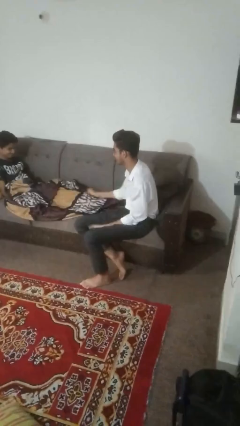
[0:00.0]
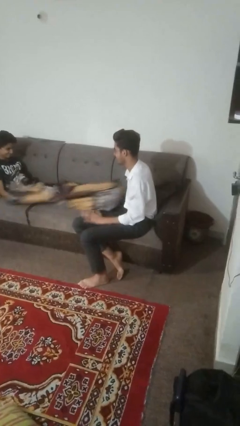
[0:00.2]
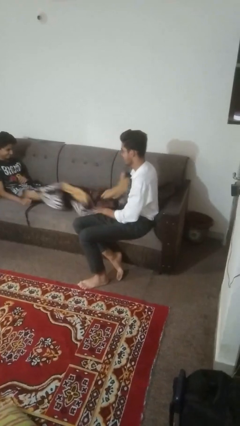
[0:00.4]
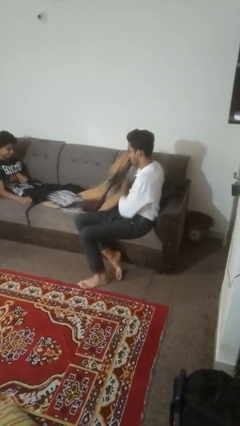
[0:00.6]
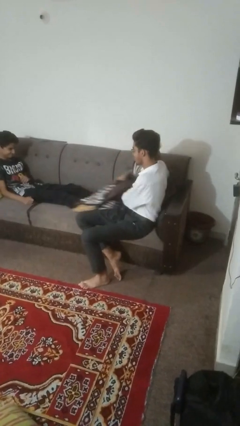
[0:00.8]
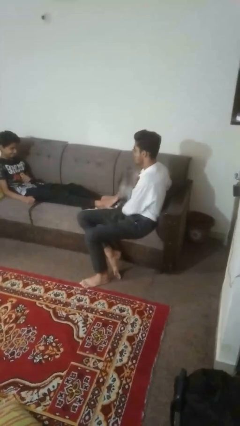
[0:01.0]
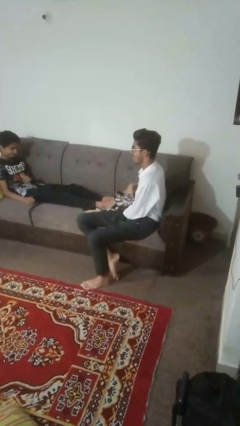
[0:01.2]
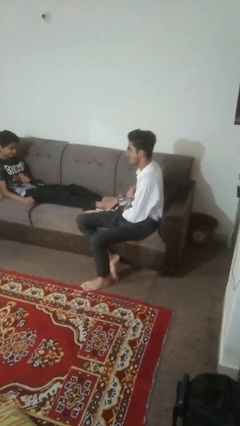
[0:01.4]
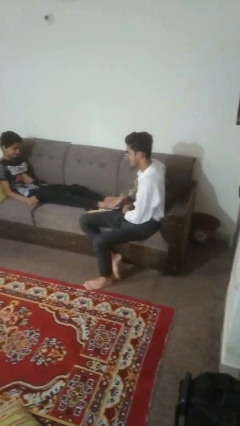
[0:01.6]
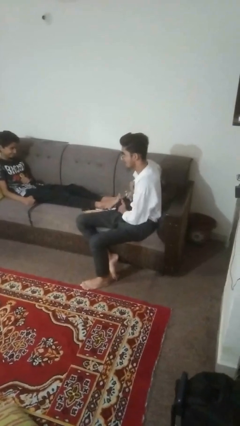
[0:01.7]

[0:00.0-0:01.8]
person uncovers friend with blanket

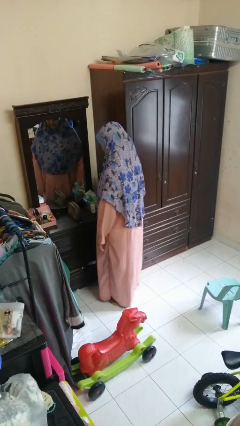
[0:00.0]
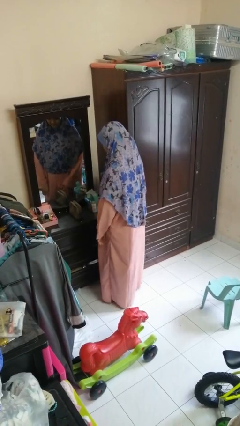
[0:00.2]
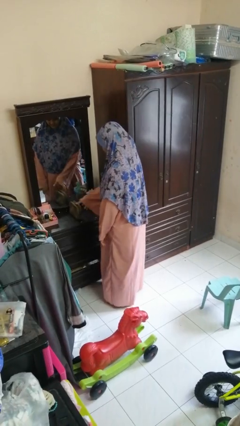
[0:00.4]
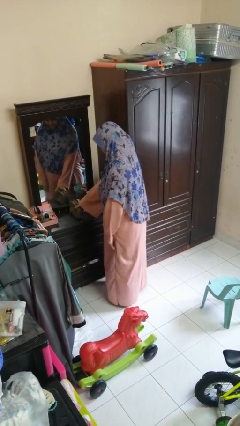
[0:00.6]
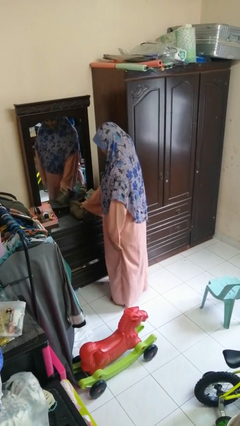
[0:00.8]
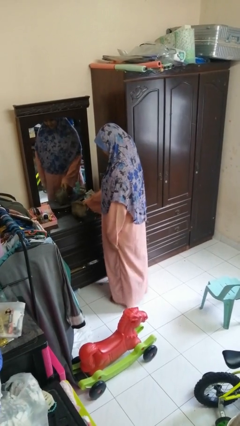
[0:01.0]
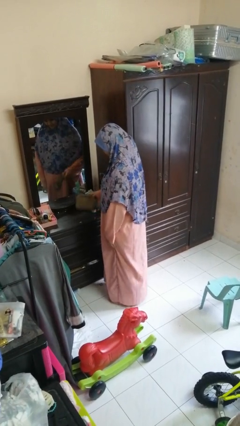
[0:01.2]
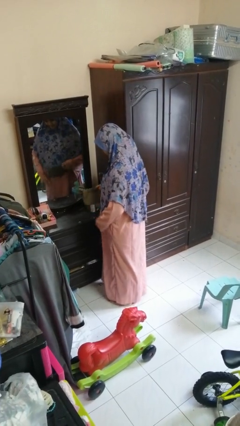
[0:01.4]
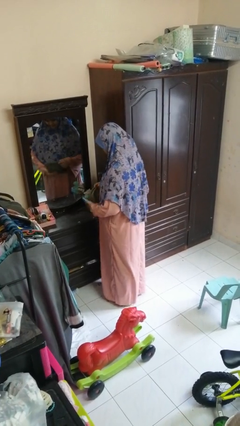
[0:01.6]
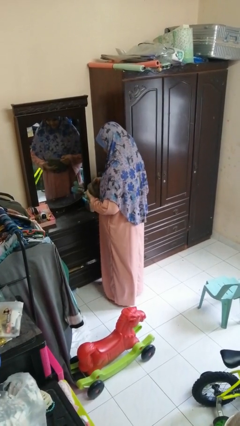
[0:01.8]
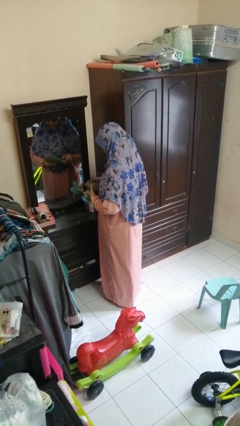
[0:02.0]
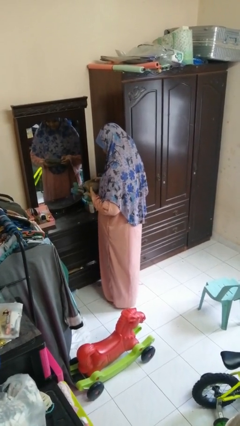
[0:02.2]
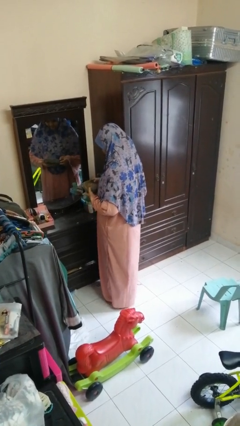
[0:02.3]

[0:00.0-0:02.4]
person picks up object from countertop

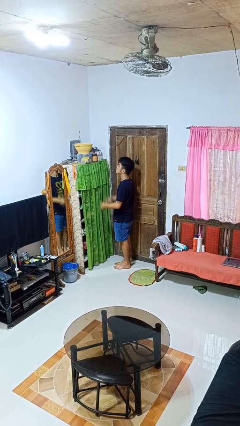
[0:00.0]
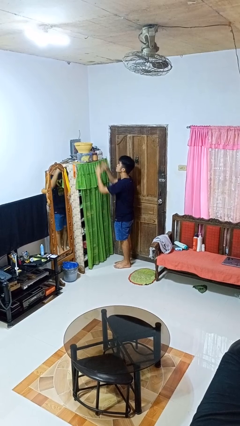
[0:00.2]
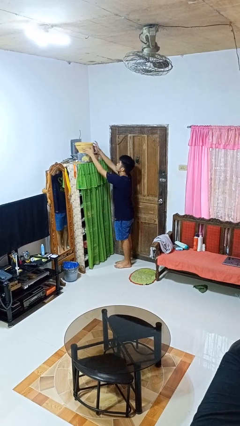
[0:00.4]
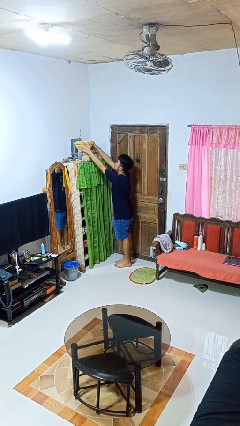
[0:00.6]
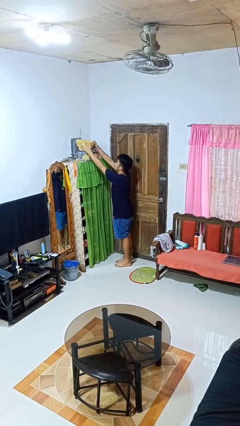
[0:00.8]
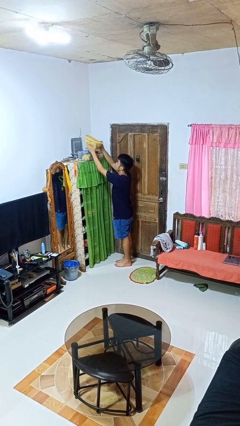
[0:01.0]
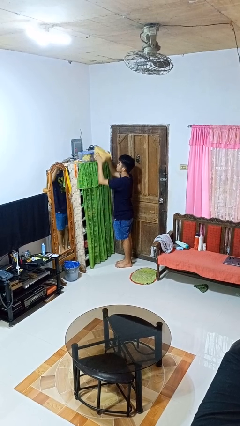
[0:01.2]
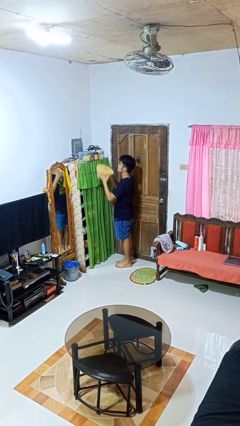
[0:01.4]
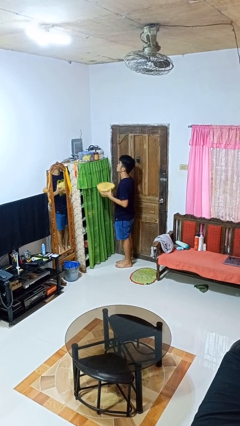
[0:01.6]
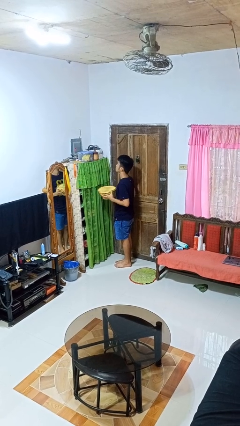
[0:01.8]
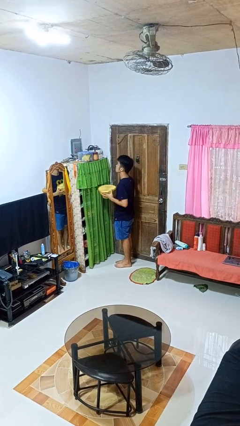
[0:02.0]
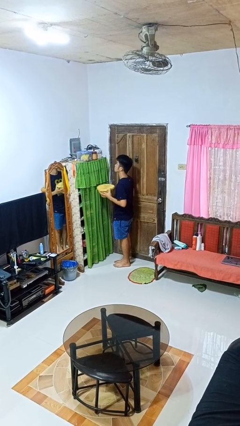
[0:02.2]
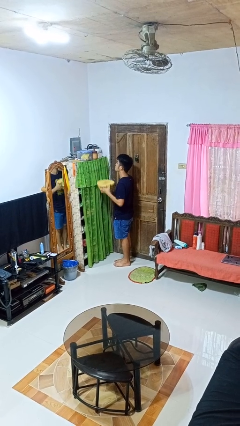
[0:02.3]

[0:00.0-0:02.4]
person picks up object from shelf

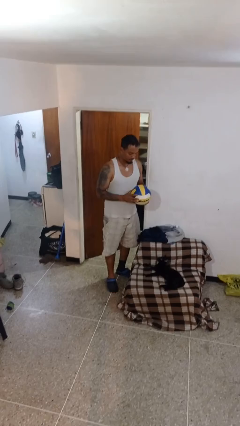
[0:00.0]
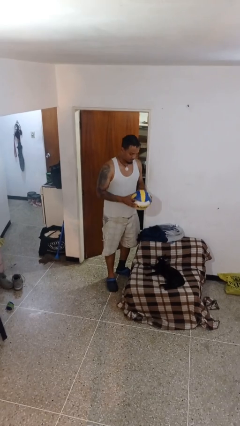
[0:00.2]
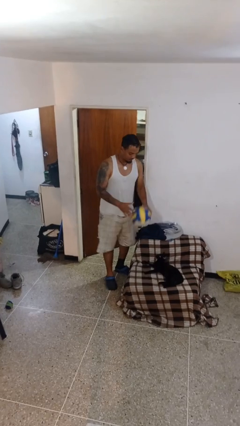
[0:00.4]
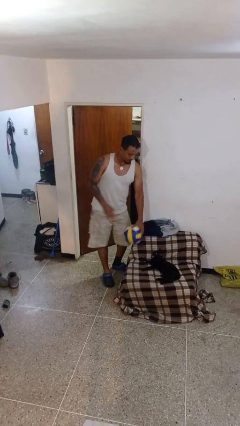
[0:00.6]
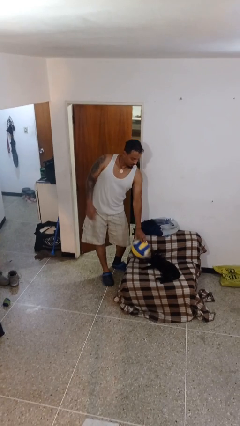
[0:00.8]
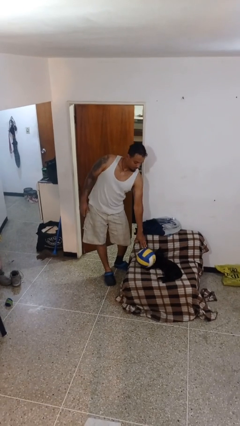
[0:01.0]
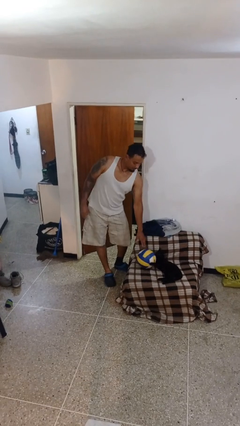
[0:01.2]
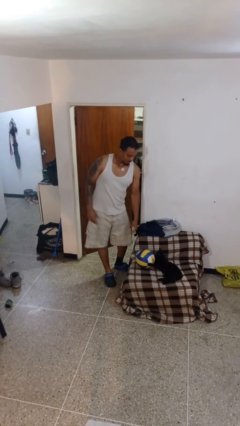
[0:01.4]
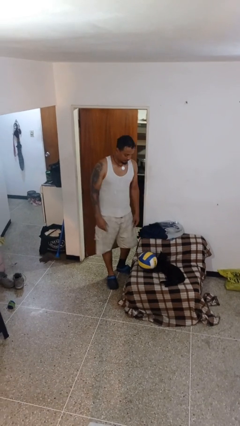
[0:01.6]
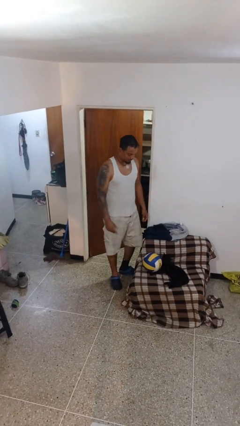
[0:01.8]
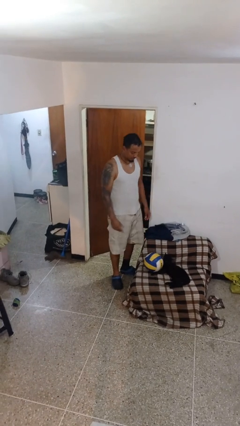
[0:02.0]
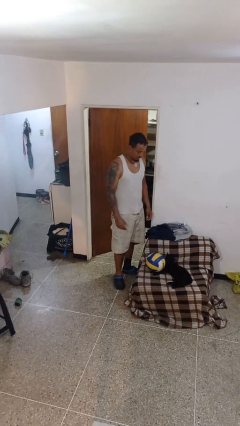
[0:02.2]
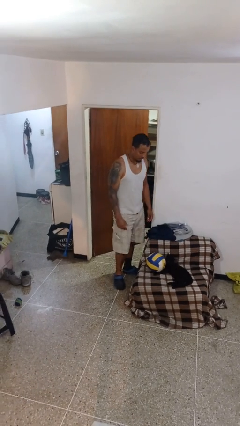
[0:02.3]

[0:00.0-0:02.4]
person puts down object on couch

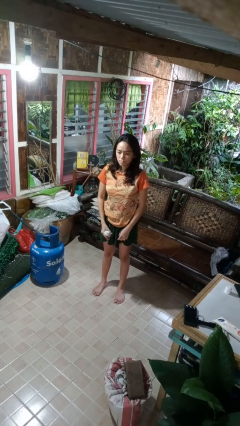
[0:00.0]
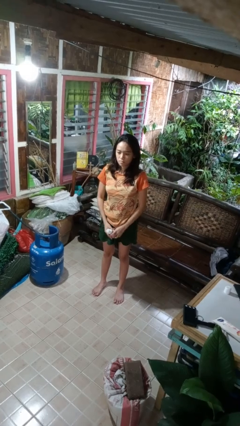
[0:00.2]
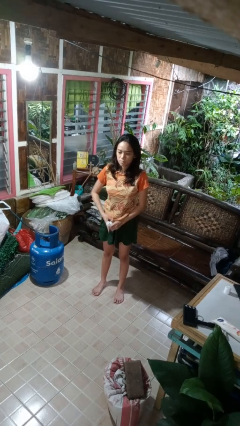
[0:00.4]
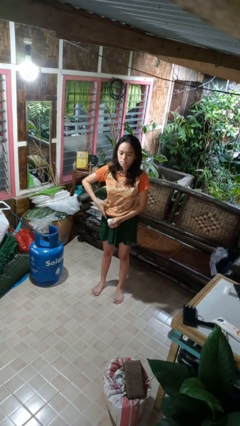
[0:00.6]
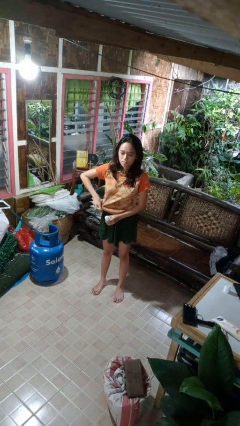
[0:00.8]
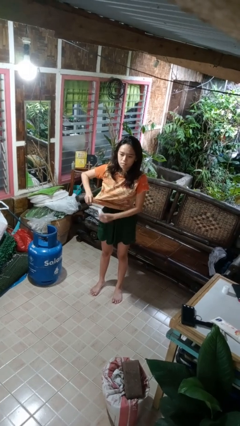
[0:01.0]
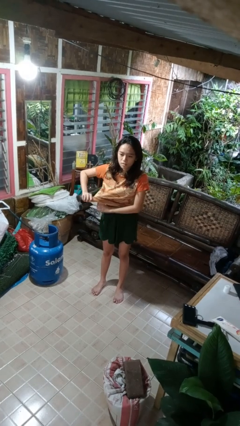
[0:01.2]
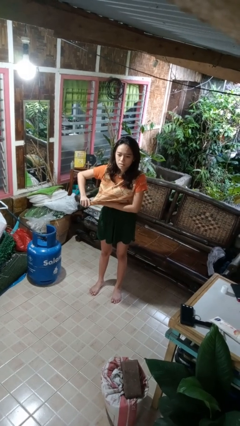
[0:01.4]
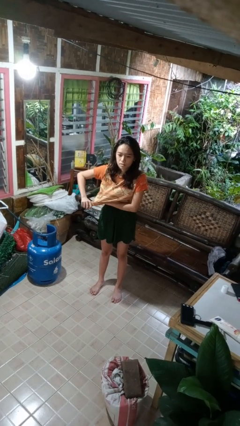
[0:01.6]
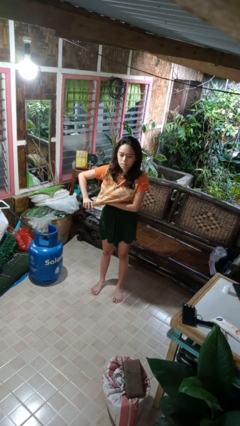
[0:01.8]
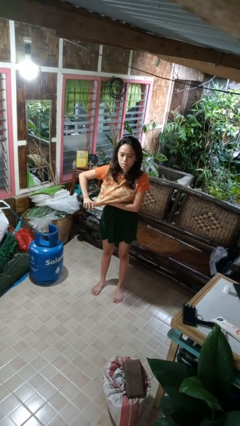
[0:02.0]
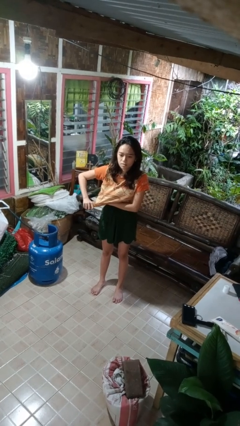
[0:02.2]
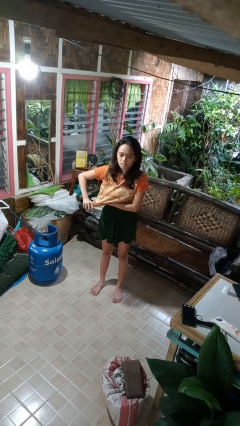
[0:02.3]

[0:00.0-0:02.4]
person applies deodorant

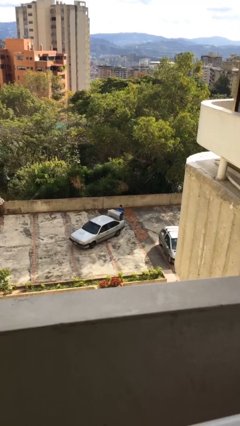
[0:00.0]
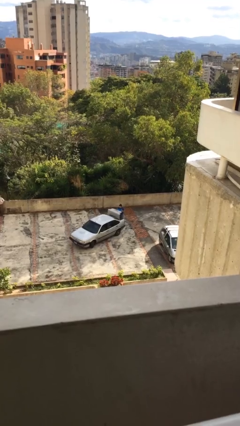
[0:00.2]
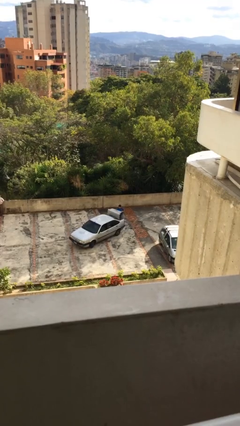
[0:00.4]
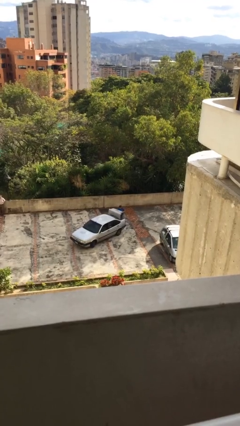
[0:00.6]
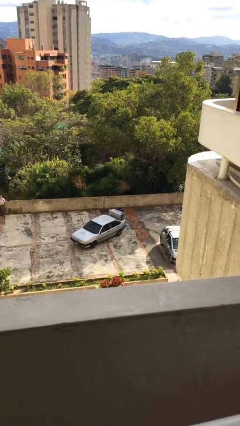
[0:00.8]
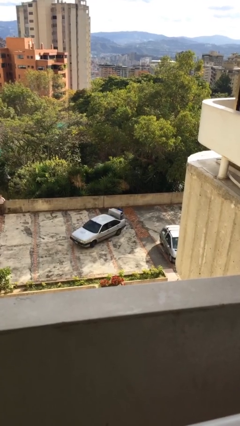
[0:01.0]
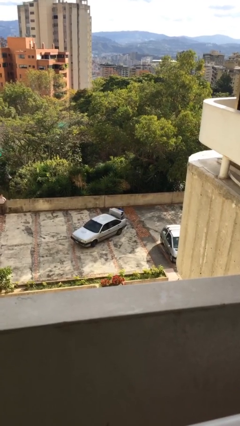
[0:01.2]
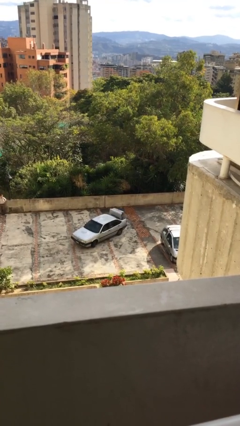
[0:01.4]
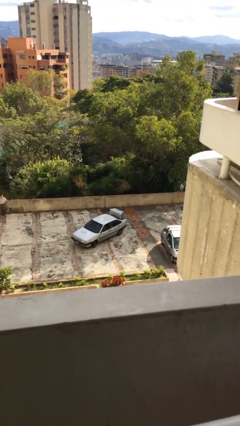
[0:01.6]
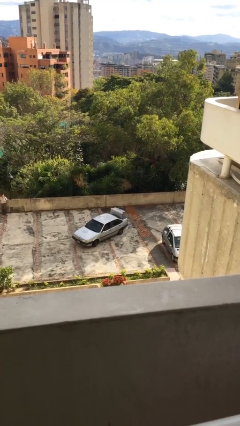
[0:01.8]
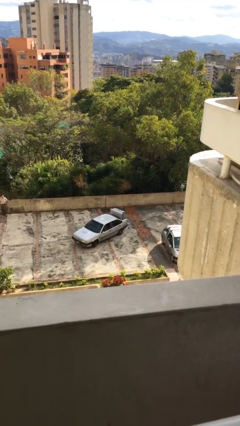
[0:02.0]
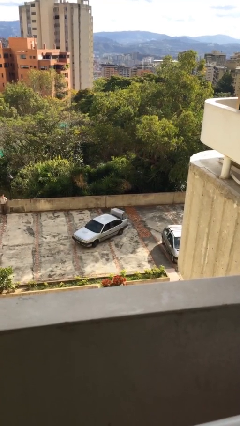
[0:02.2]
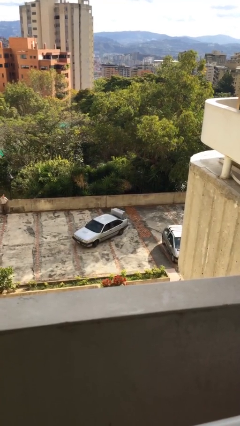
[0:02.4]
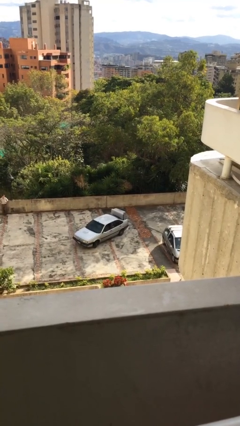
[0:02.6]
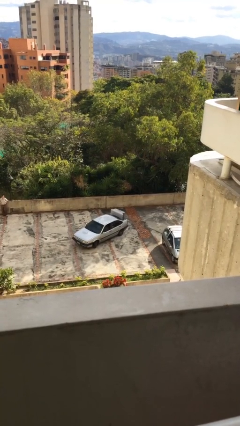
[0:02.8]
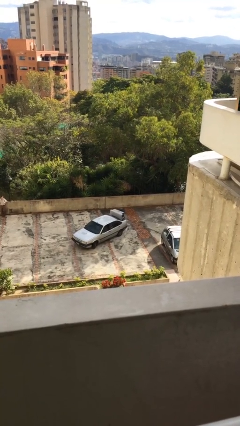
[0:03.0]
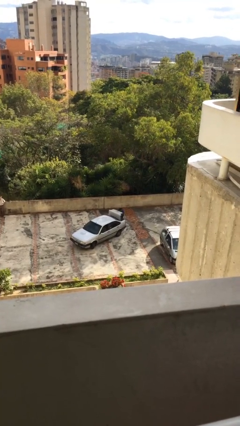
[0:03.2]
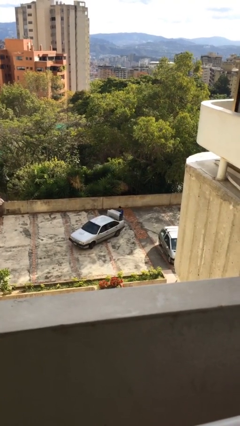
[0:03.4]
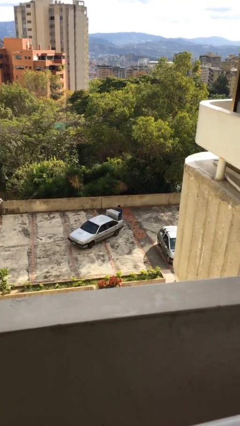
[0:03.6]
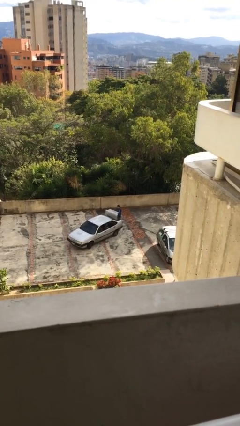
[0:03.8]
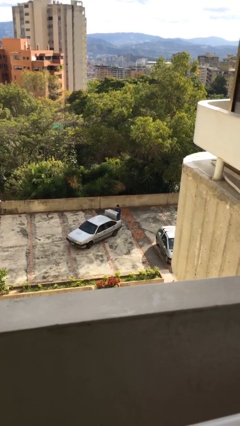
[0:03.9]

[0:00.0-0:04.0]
person loads car

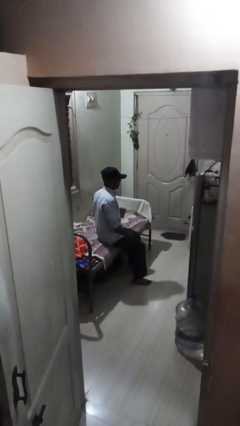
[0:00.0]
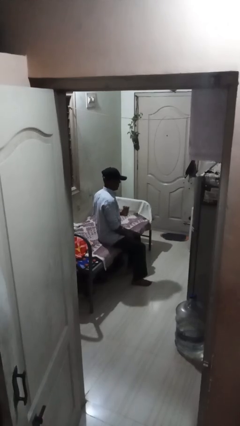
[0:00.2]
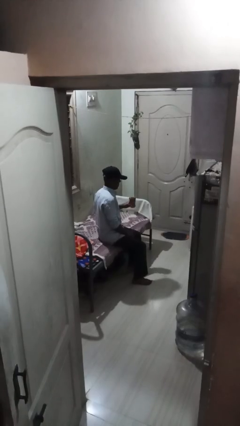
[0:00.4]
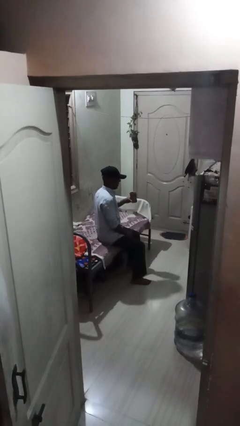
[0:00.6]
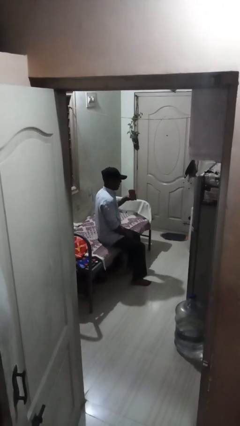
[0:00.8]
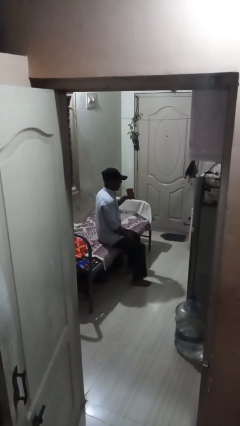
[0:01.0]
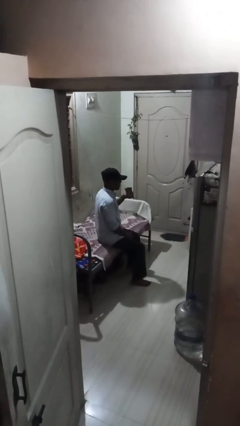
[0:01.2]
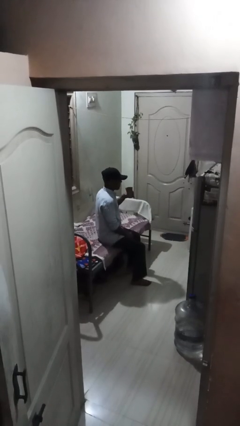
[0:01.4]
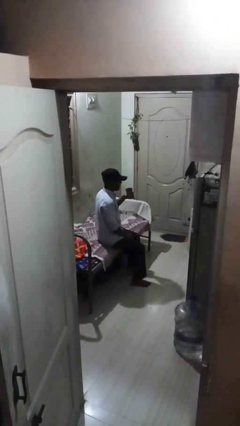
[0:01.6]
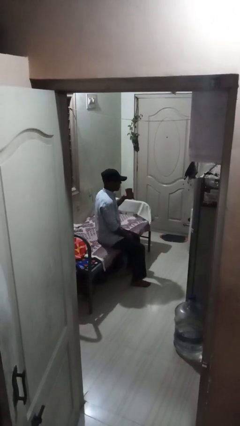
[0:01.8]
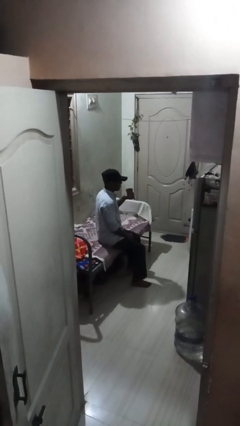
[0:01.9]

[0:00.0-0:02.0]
person drinks from straw
